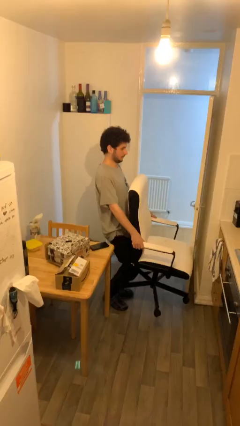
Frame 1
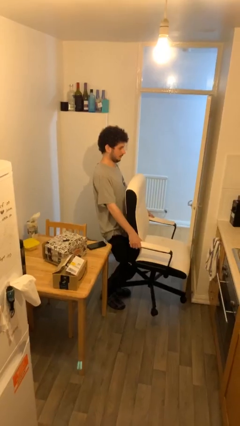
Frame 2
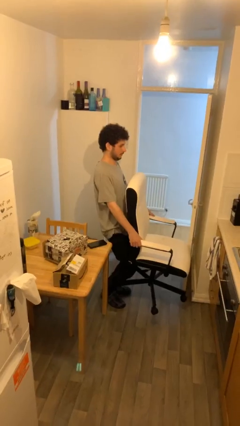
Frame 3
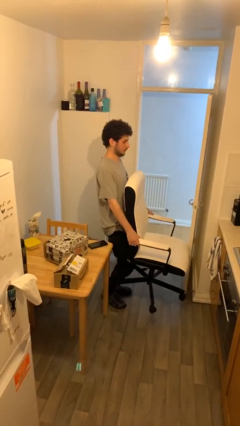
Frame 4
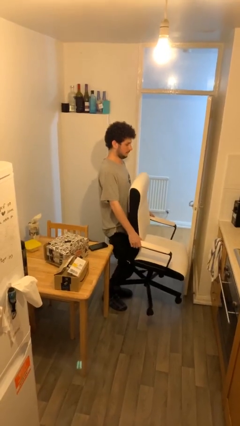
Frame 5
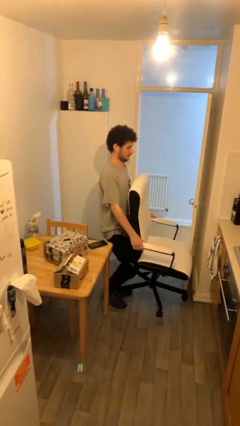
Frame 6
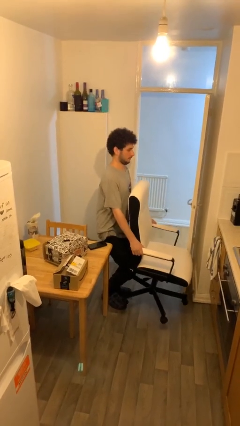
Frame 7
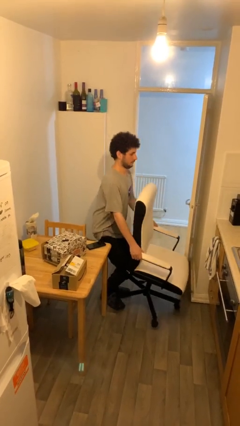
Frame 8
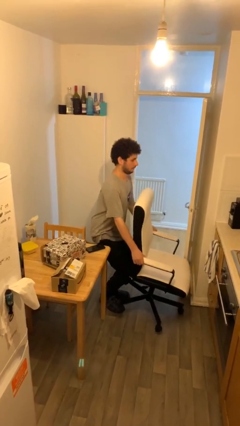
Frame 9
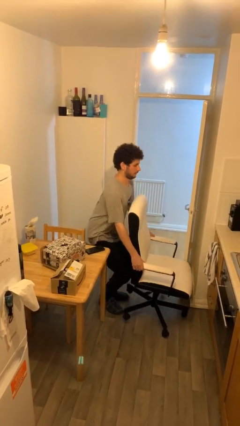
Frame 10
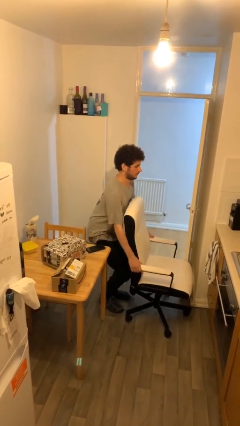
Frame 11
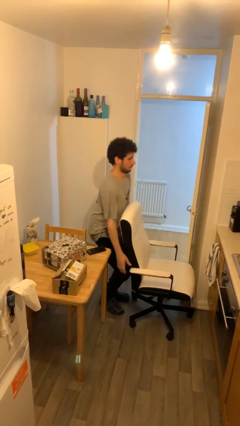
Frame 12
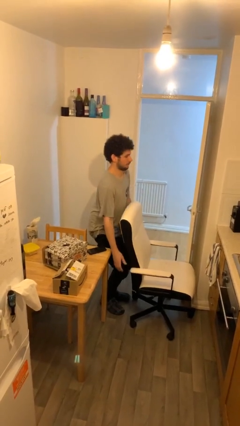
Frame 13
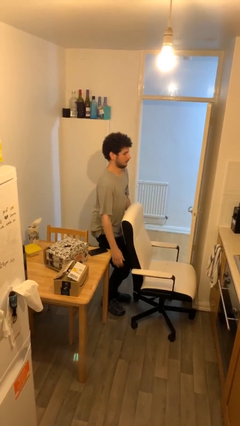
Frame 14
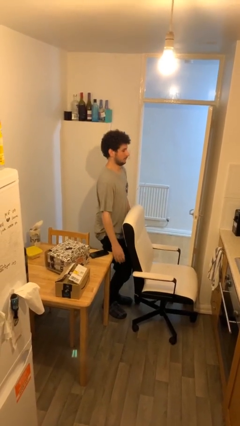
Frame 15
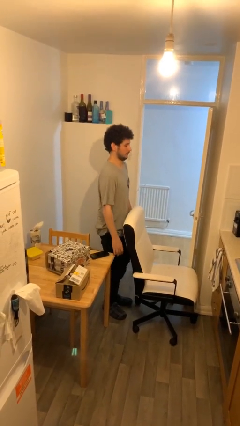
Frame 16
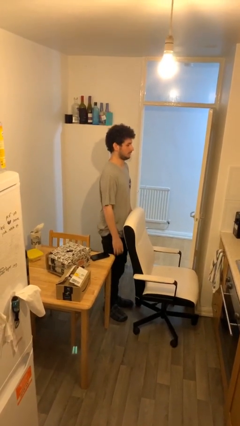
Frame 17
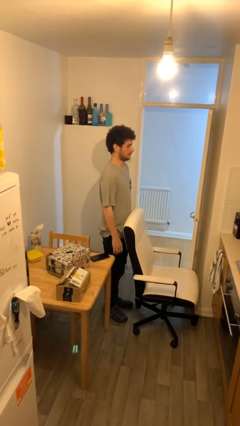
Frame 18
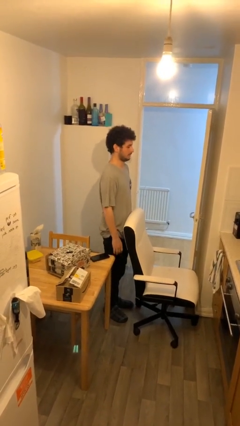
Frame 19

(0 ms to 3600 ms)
person puts down object on floor

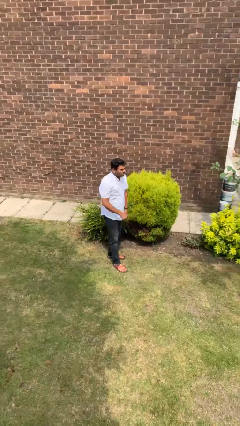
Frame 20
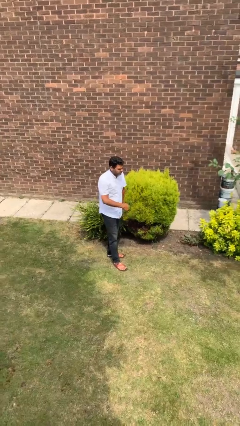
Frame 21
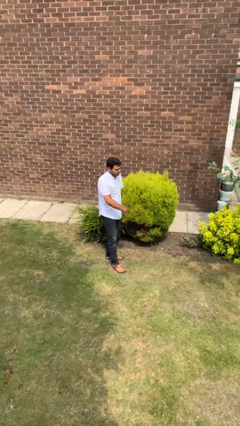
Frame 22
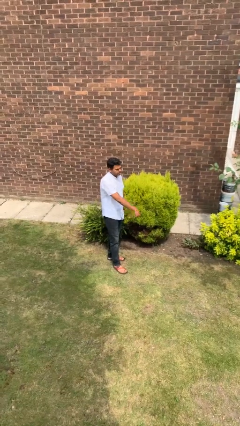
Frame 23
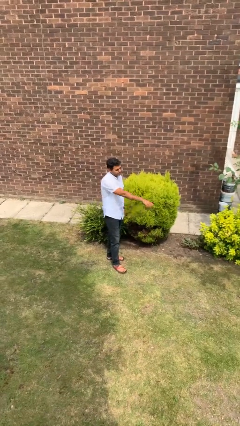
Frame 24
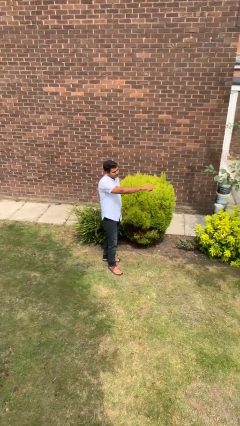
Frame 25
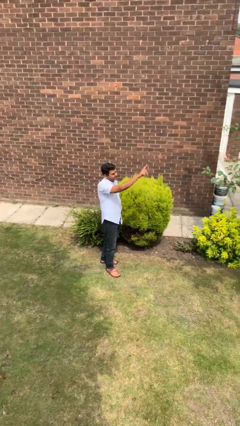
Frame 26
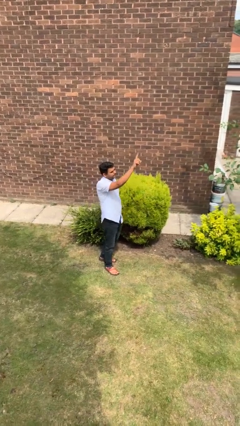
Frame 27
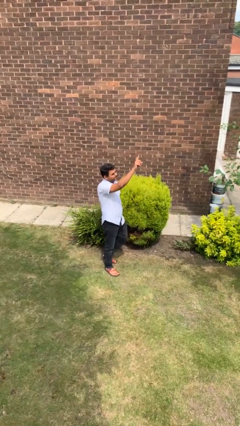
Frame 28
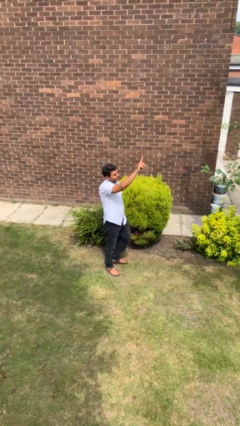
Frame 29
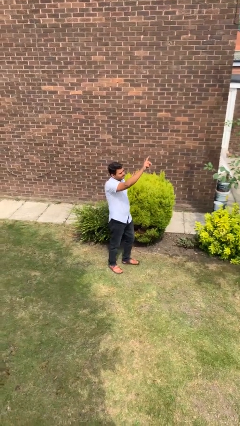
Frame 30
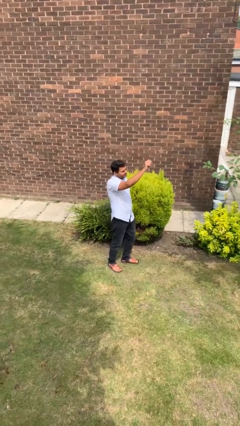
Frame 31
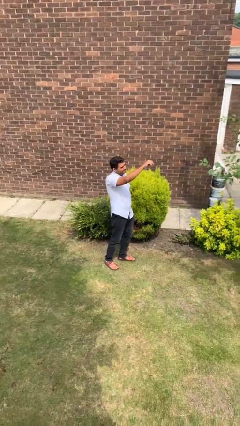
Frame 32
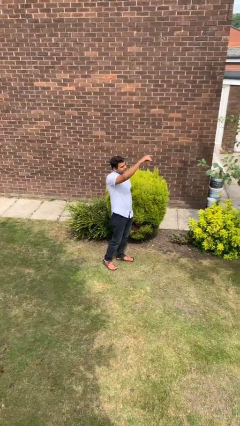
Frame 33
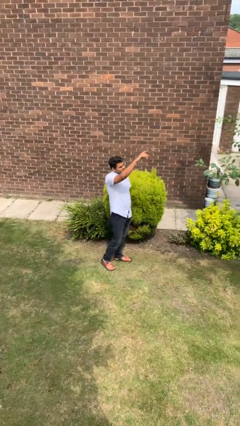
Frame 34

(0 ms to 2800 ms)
person gestures swipe up

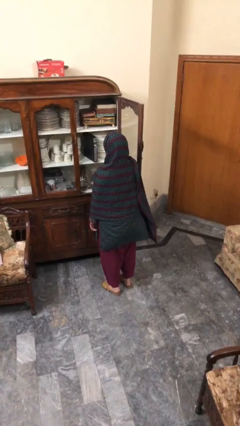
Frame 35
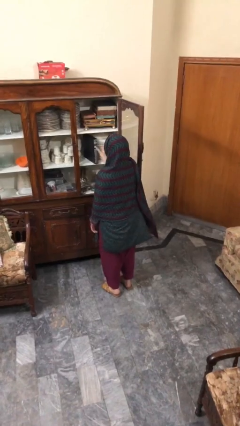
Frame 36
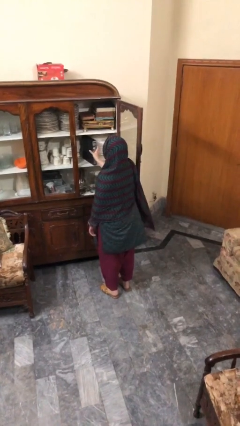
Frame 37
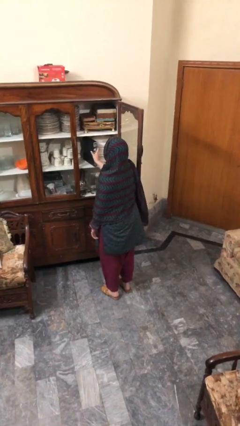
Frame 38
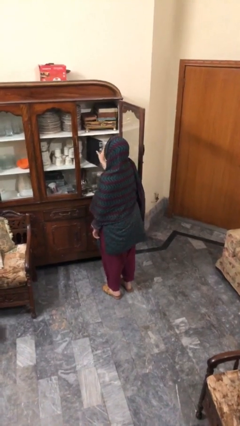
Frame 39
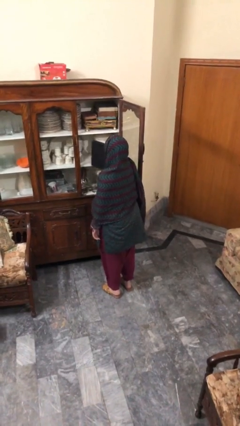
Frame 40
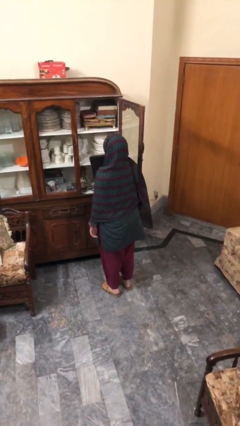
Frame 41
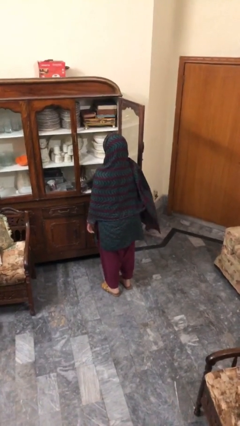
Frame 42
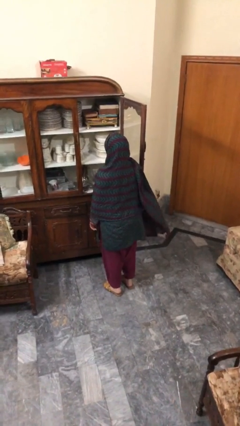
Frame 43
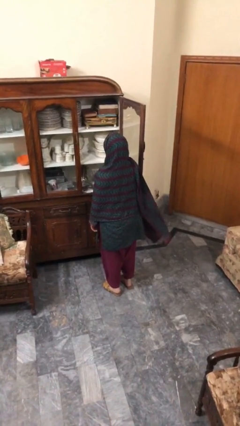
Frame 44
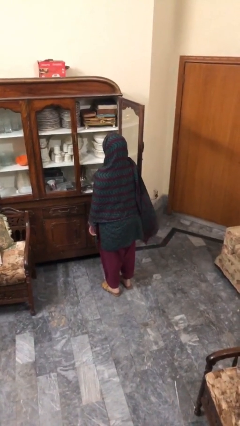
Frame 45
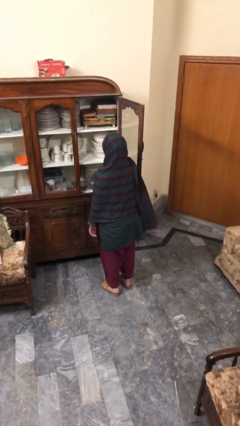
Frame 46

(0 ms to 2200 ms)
person picks up object from cabinet

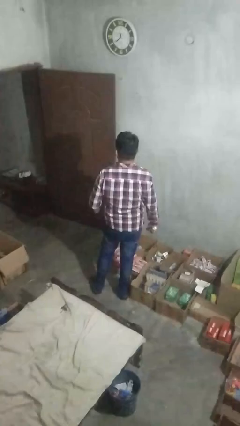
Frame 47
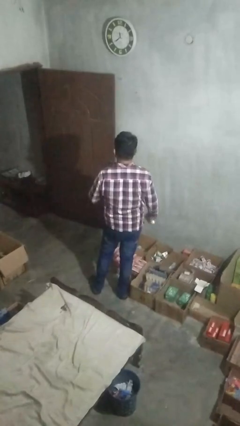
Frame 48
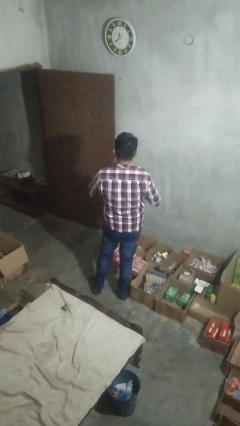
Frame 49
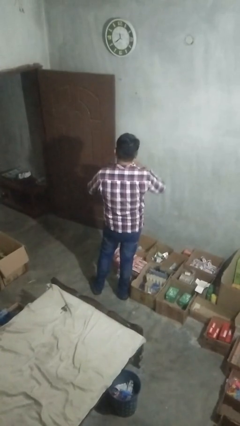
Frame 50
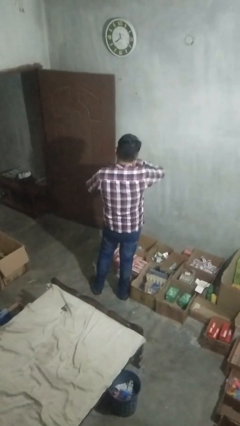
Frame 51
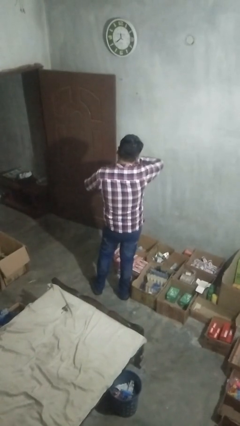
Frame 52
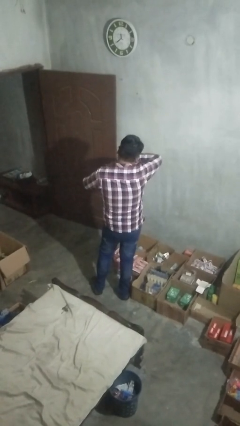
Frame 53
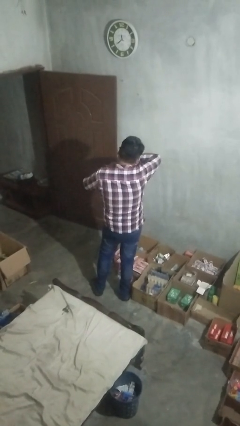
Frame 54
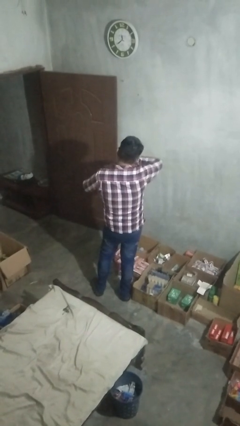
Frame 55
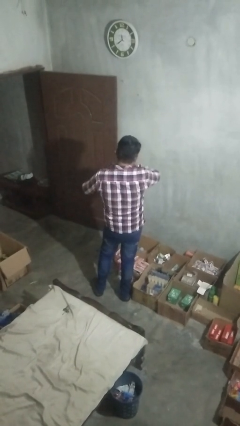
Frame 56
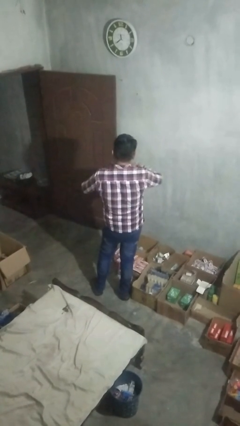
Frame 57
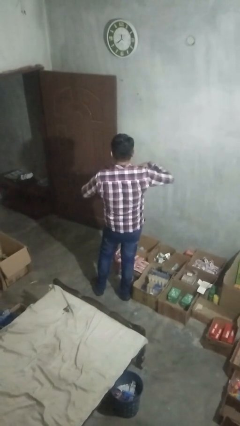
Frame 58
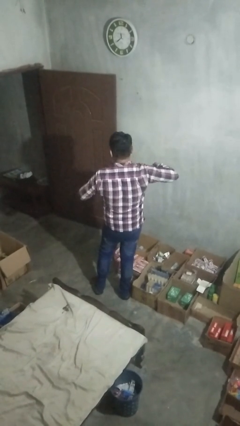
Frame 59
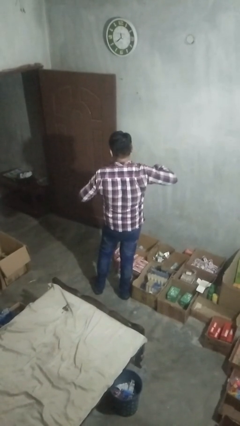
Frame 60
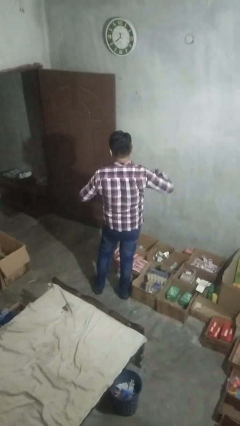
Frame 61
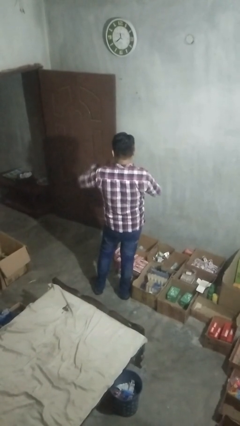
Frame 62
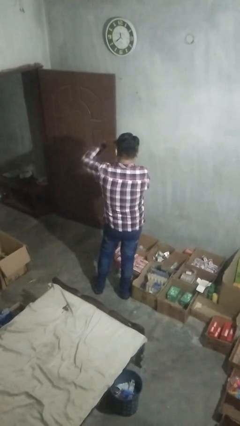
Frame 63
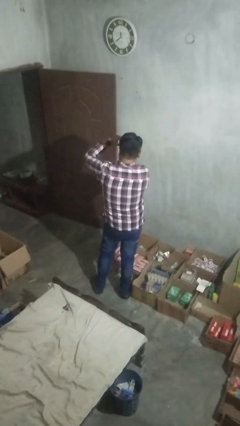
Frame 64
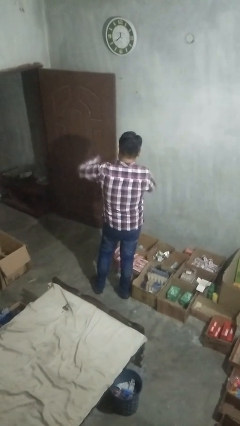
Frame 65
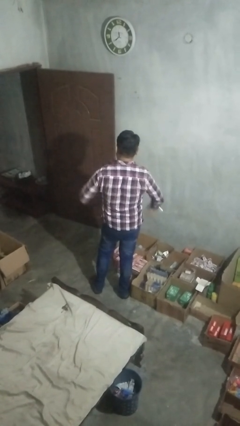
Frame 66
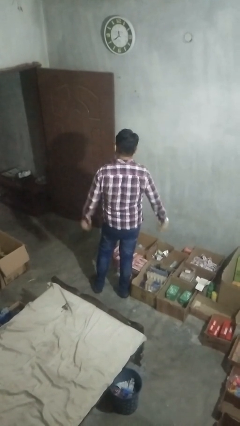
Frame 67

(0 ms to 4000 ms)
person applies deodorant

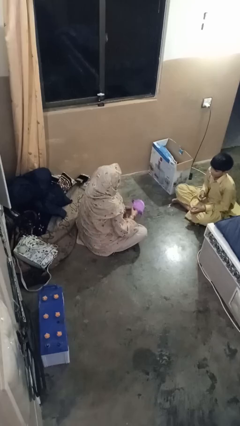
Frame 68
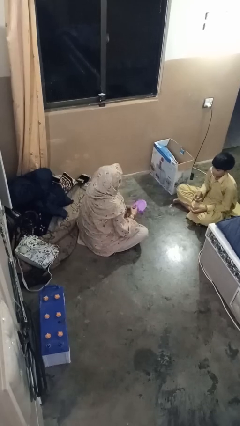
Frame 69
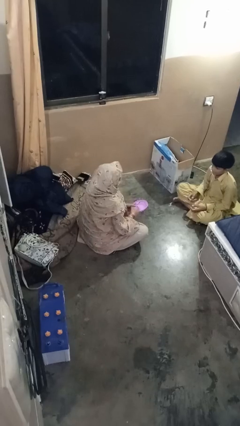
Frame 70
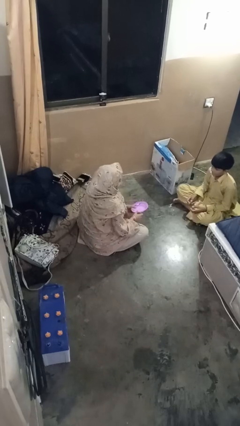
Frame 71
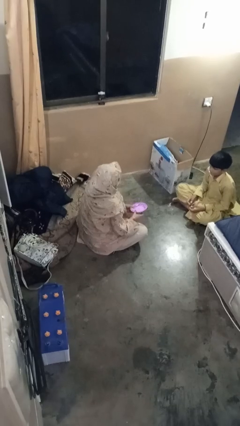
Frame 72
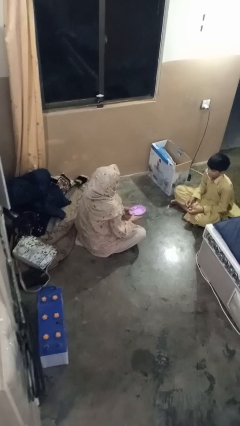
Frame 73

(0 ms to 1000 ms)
person catches object from person

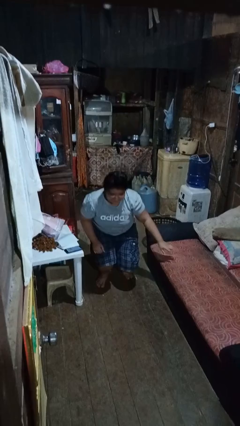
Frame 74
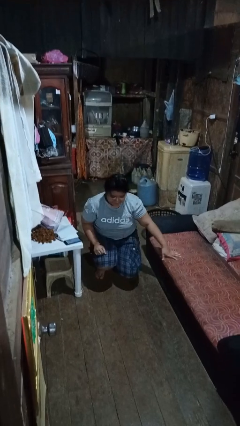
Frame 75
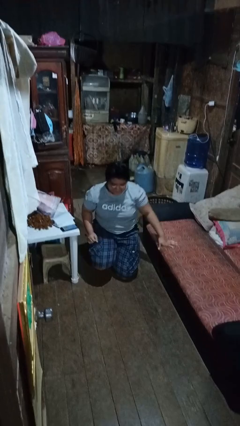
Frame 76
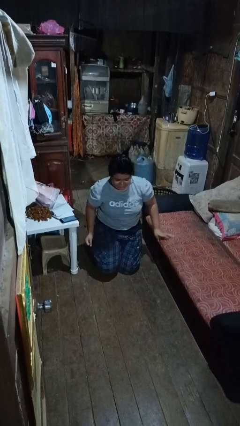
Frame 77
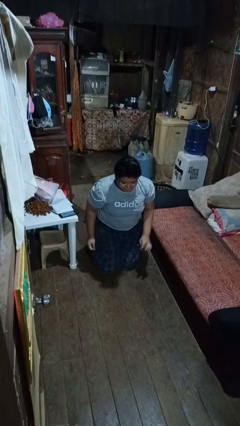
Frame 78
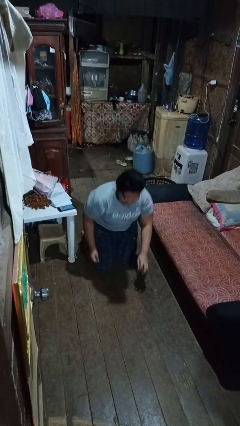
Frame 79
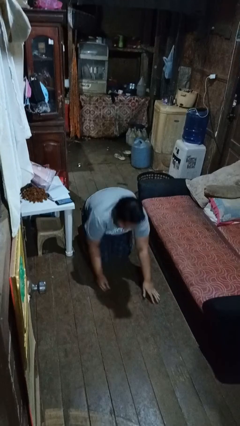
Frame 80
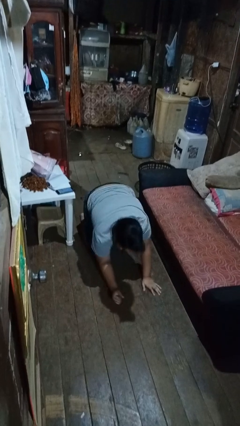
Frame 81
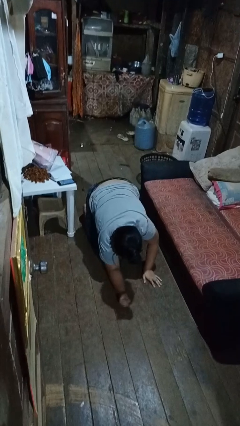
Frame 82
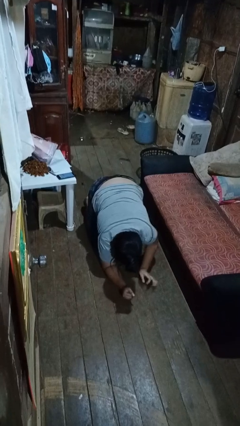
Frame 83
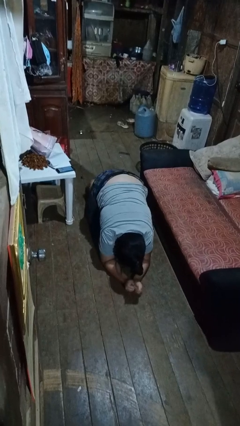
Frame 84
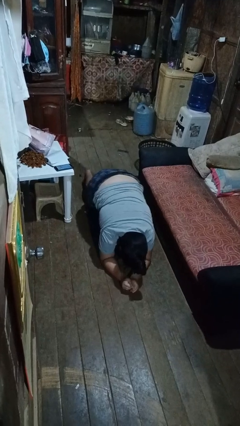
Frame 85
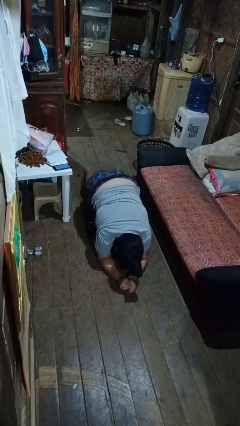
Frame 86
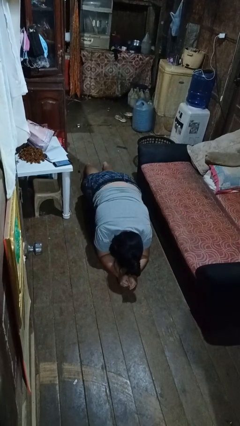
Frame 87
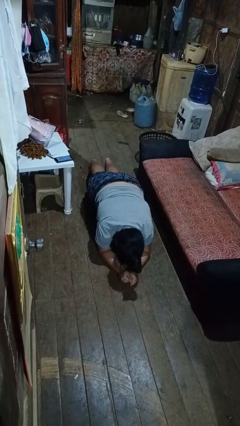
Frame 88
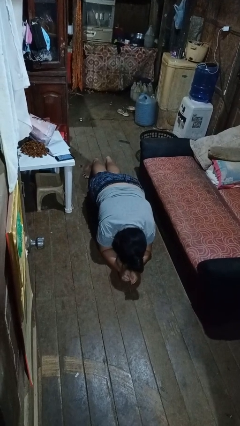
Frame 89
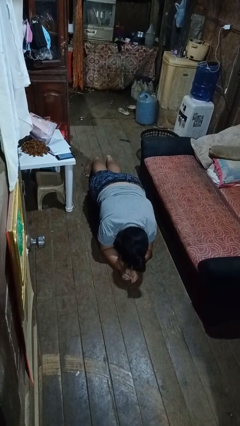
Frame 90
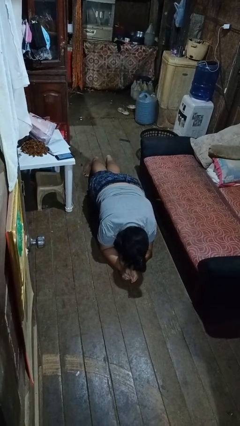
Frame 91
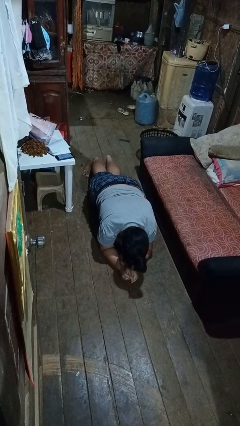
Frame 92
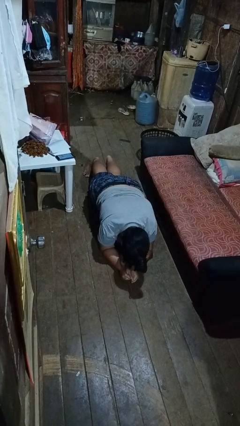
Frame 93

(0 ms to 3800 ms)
person exercises with plank
